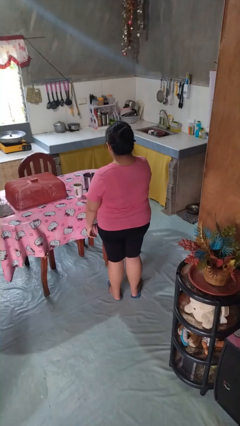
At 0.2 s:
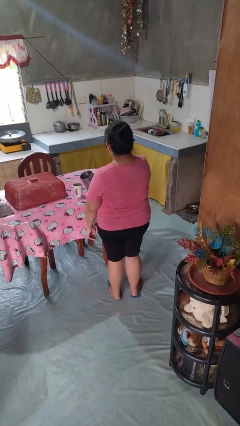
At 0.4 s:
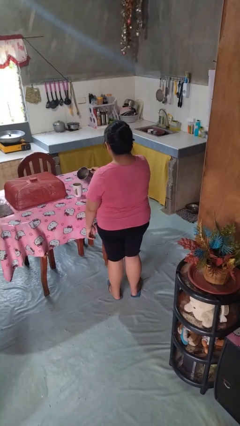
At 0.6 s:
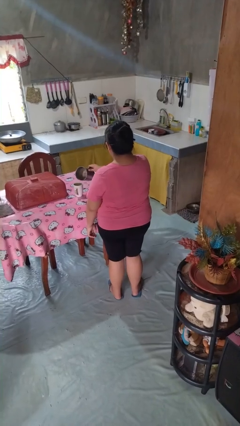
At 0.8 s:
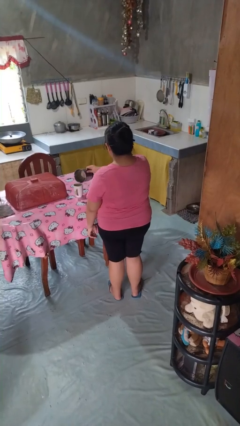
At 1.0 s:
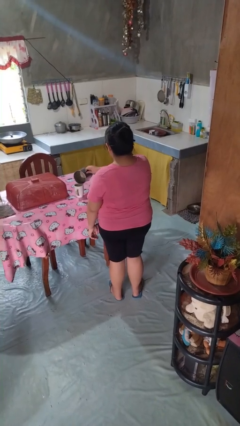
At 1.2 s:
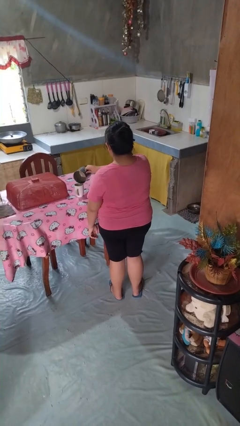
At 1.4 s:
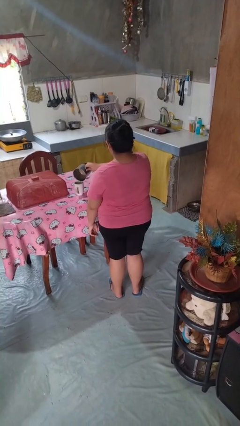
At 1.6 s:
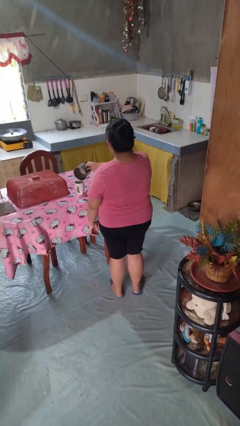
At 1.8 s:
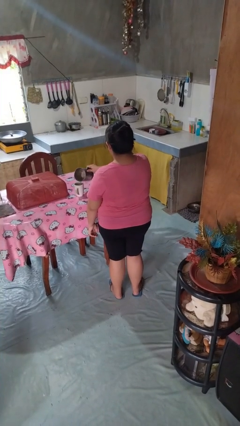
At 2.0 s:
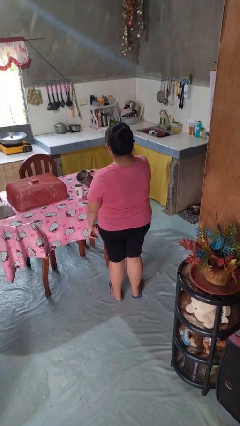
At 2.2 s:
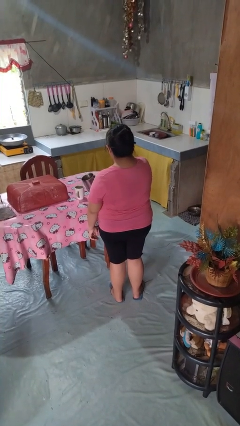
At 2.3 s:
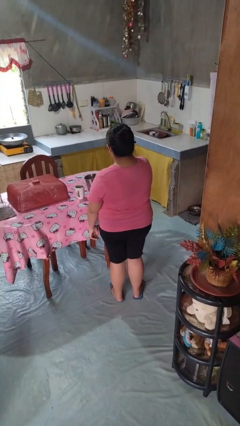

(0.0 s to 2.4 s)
person pours coffee into mug

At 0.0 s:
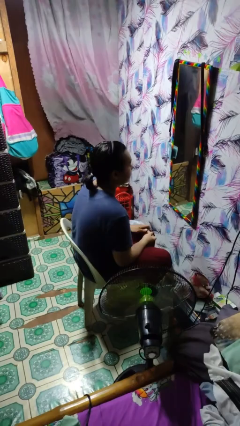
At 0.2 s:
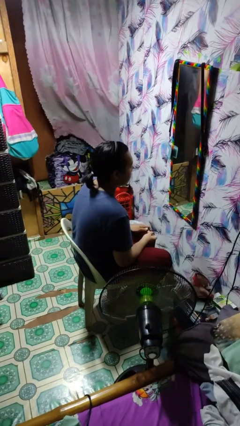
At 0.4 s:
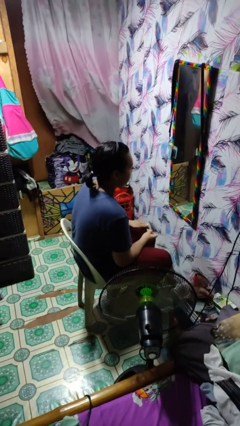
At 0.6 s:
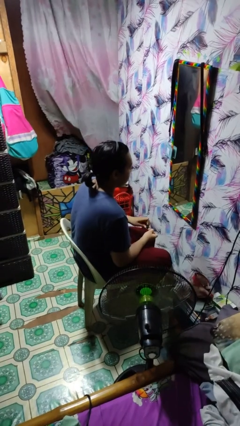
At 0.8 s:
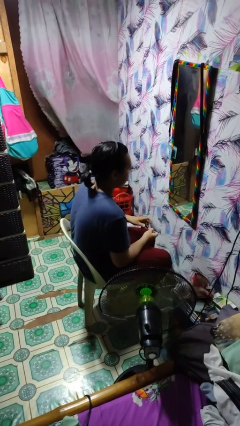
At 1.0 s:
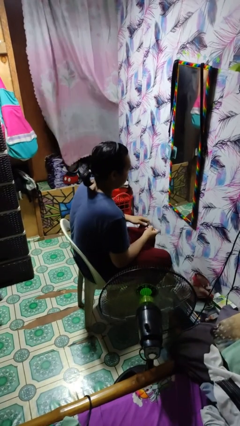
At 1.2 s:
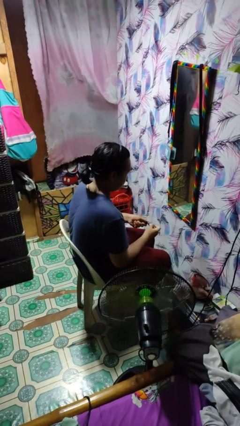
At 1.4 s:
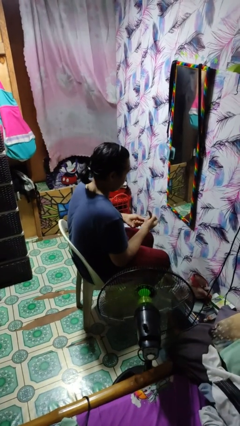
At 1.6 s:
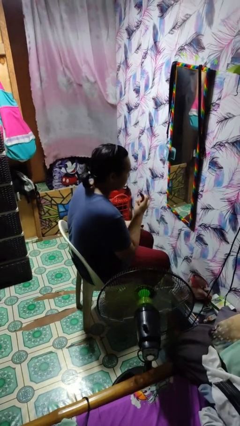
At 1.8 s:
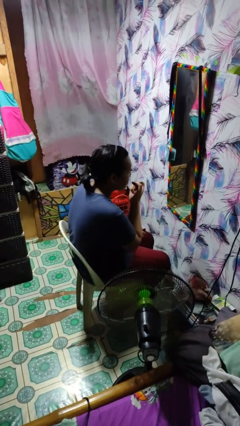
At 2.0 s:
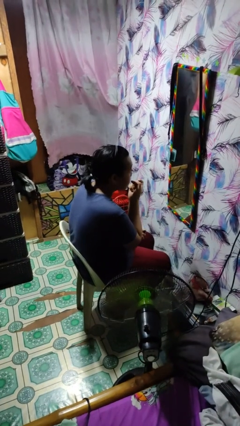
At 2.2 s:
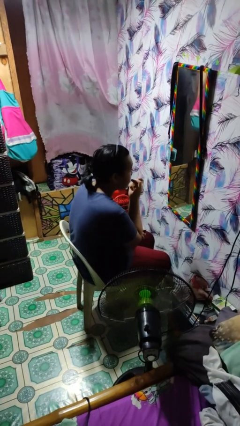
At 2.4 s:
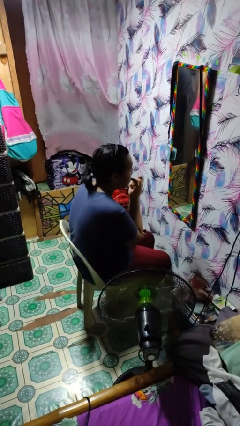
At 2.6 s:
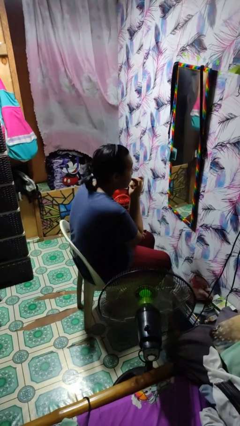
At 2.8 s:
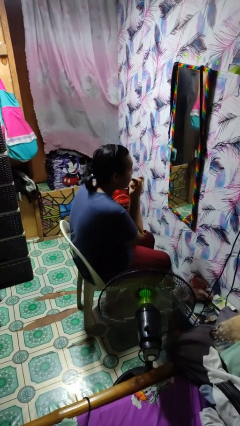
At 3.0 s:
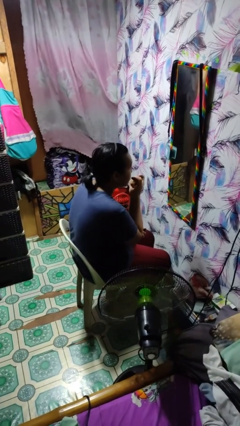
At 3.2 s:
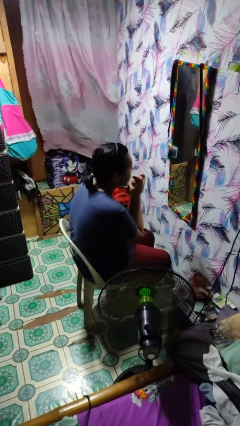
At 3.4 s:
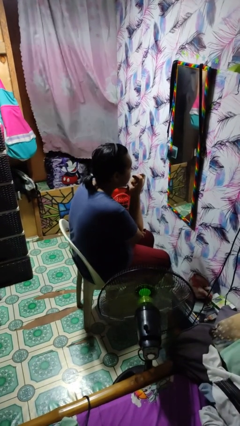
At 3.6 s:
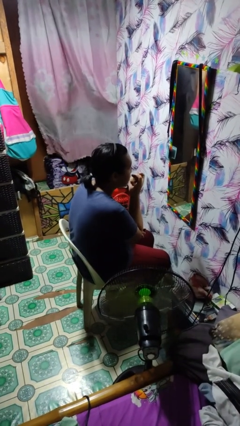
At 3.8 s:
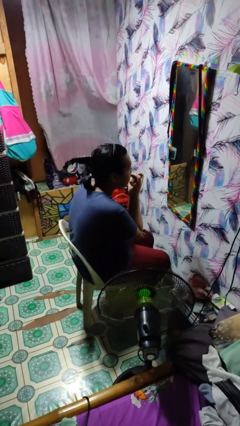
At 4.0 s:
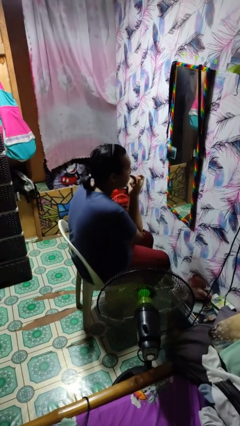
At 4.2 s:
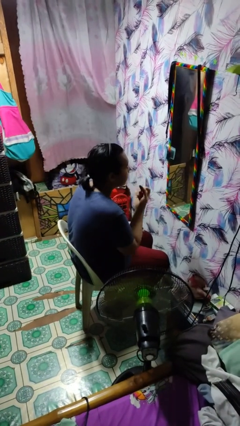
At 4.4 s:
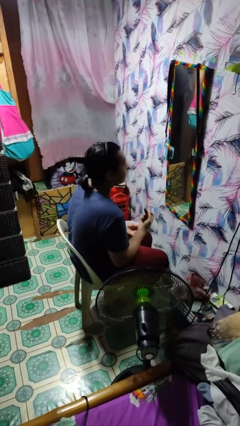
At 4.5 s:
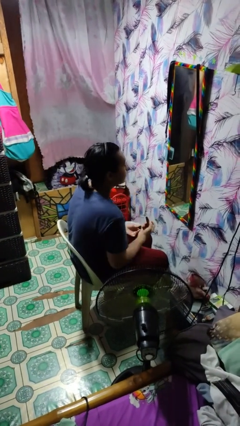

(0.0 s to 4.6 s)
person applies lip makeup

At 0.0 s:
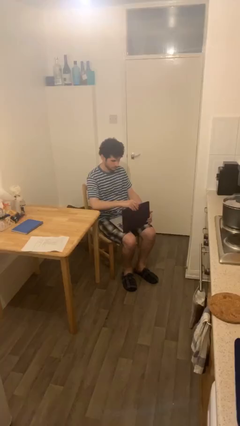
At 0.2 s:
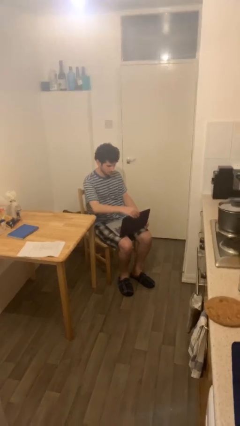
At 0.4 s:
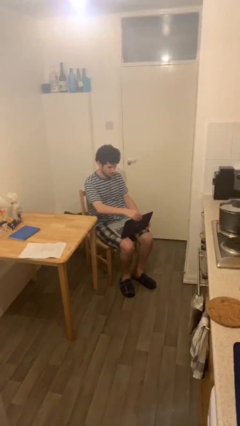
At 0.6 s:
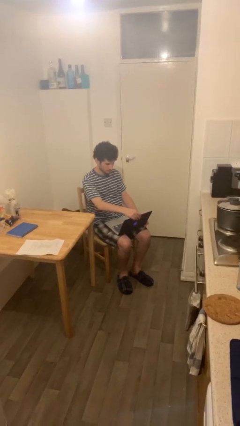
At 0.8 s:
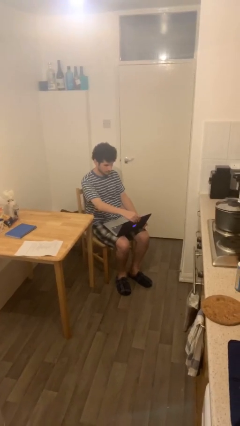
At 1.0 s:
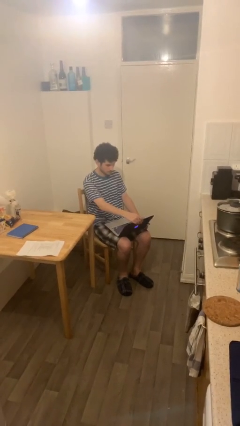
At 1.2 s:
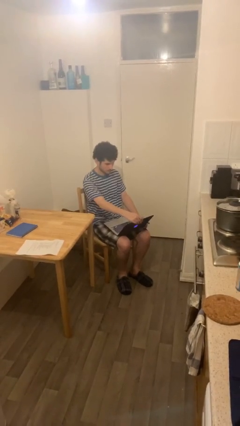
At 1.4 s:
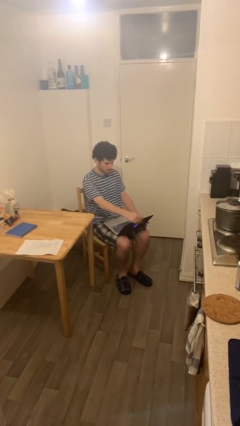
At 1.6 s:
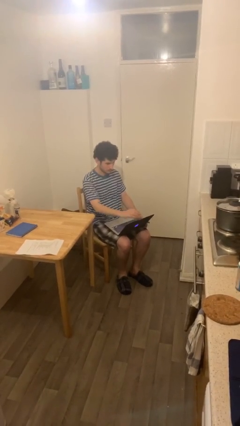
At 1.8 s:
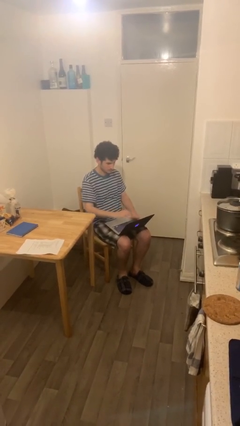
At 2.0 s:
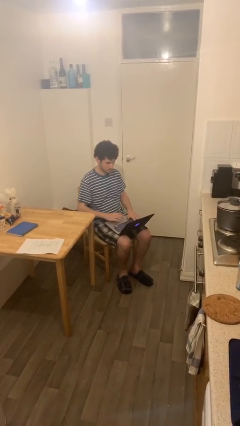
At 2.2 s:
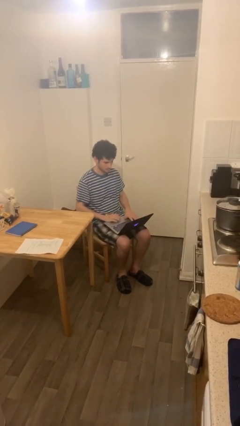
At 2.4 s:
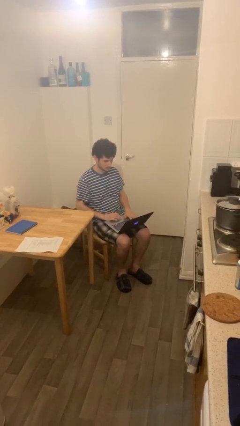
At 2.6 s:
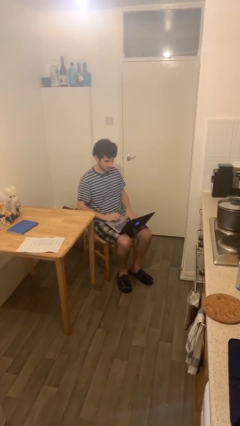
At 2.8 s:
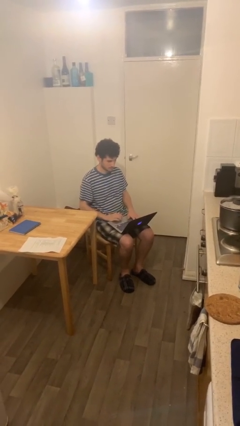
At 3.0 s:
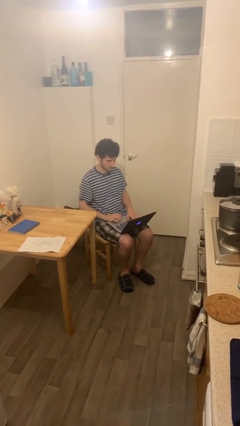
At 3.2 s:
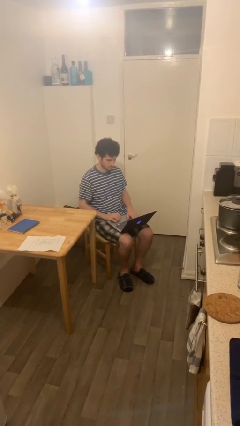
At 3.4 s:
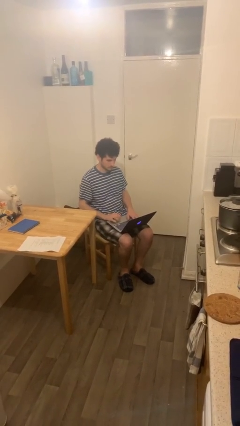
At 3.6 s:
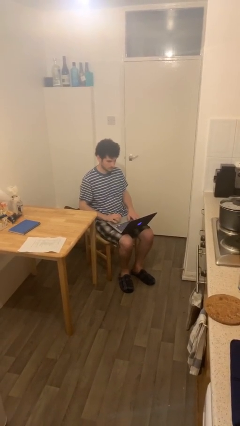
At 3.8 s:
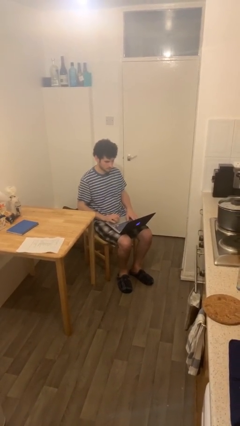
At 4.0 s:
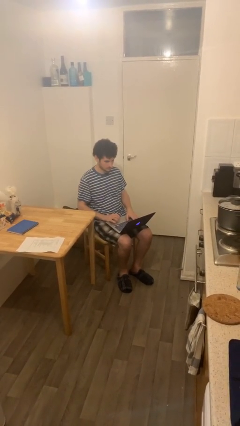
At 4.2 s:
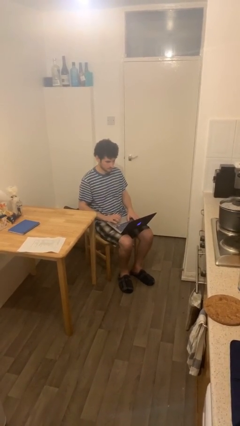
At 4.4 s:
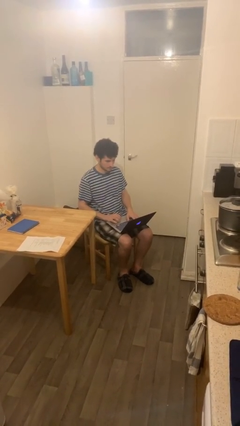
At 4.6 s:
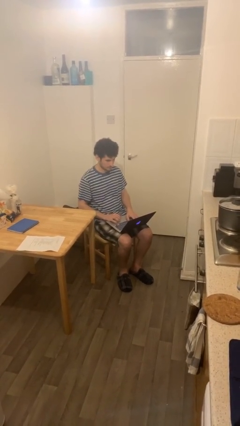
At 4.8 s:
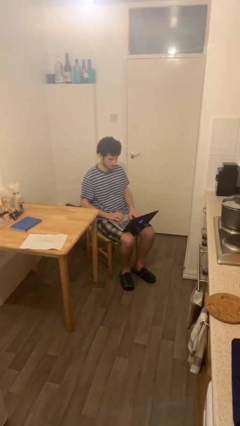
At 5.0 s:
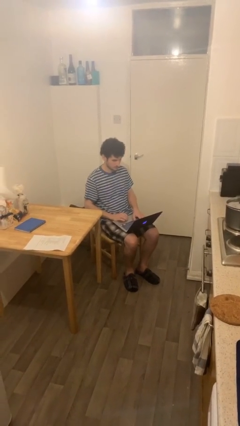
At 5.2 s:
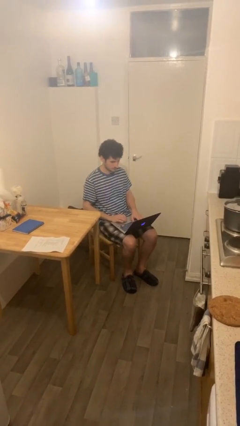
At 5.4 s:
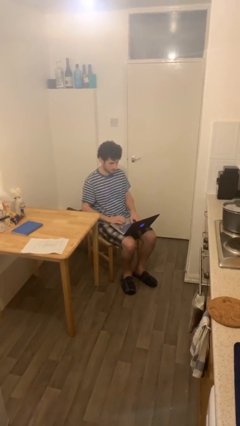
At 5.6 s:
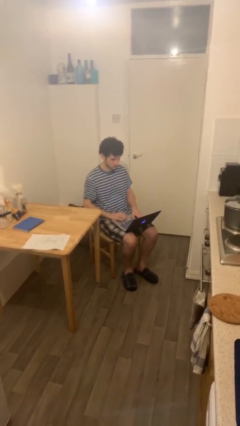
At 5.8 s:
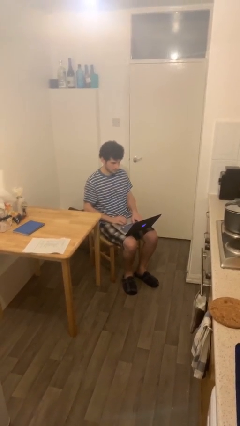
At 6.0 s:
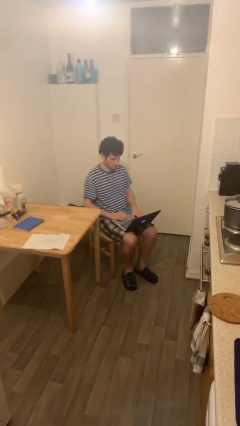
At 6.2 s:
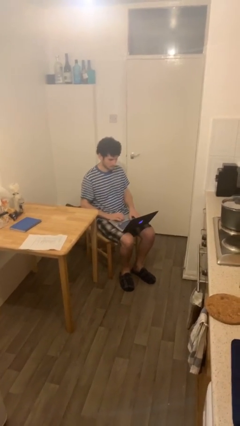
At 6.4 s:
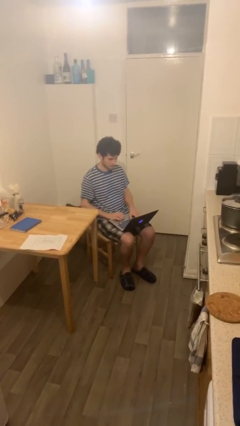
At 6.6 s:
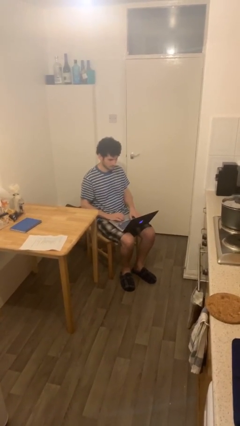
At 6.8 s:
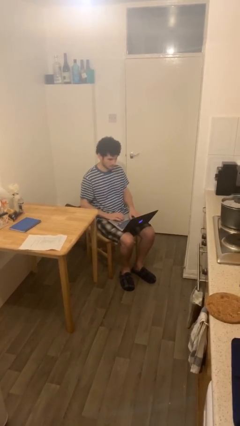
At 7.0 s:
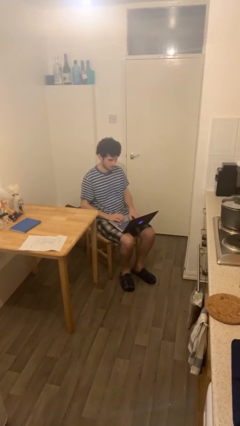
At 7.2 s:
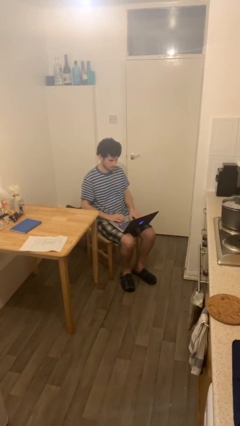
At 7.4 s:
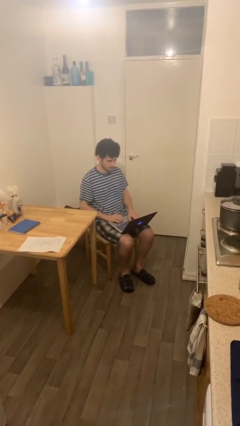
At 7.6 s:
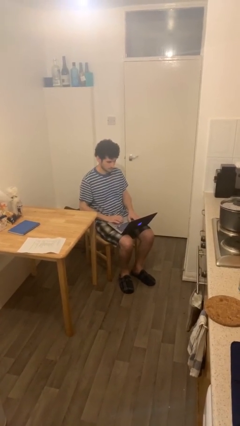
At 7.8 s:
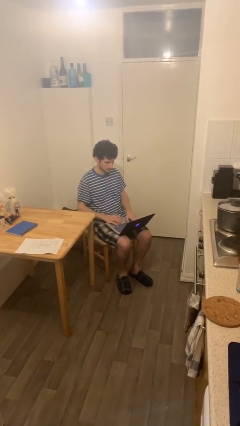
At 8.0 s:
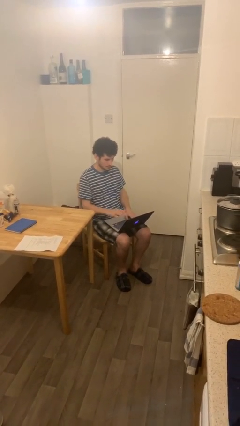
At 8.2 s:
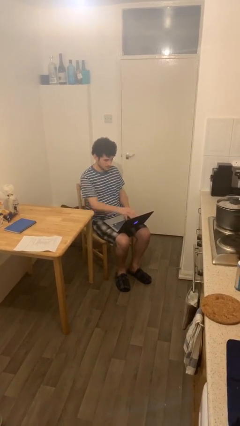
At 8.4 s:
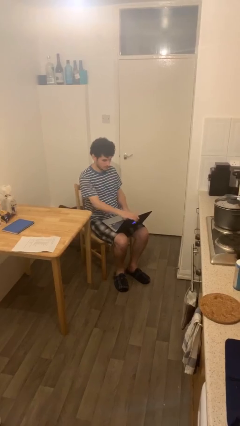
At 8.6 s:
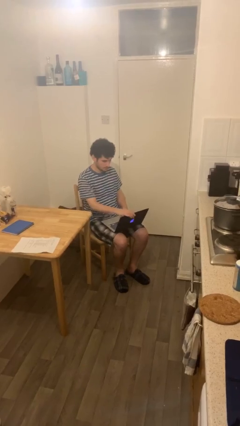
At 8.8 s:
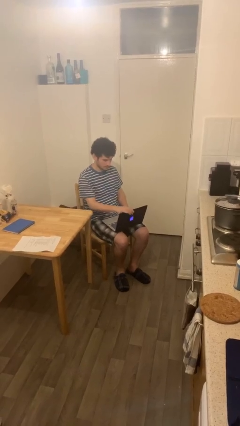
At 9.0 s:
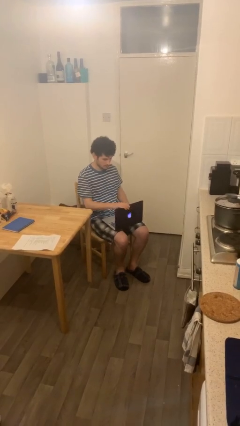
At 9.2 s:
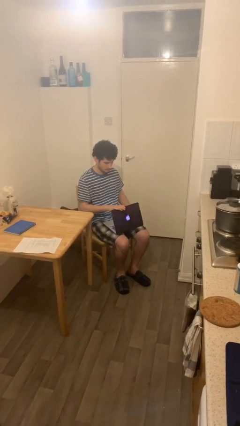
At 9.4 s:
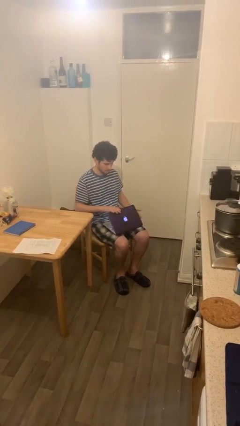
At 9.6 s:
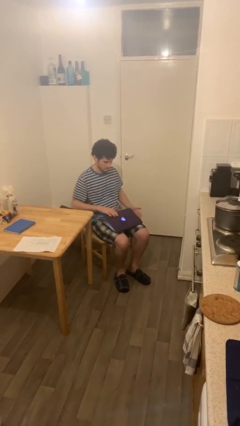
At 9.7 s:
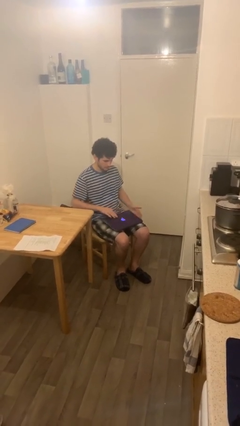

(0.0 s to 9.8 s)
person interacts with laptop

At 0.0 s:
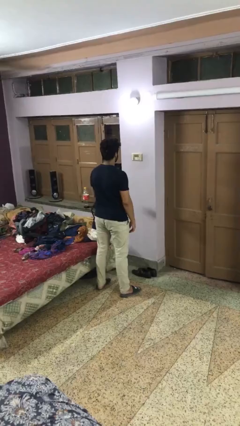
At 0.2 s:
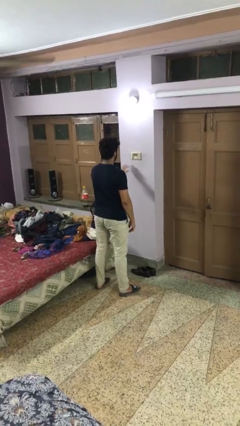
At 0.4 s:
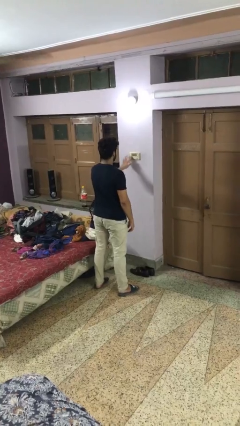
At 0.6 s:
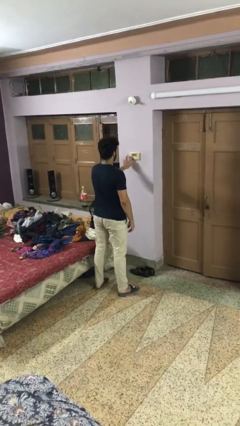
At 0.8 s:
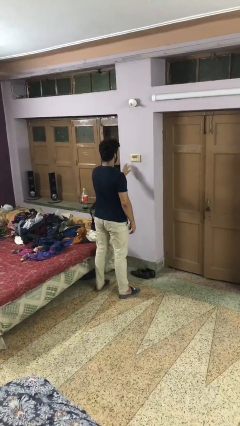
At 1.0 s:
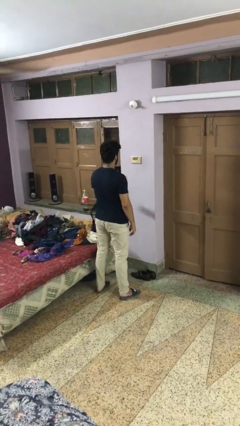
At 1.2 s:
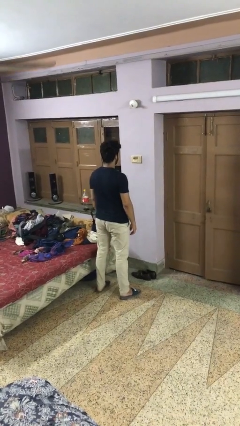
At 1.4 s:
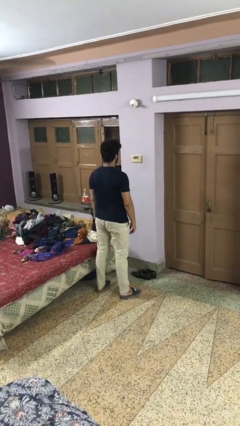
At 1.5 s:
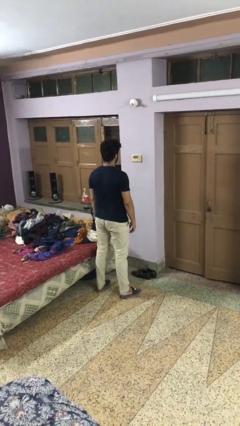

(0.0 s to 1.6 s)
person turns off lamp
